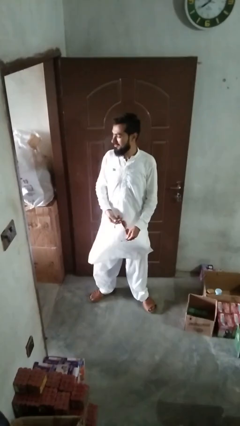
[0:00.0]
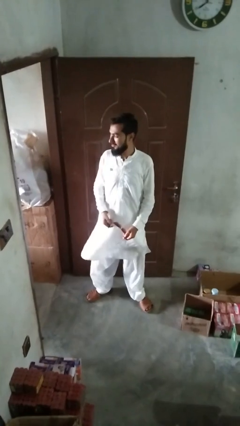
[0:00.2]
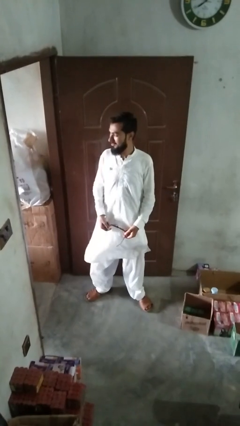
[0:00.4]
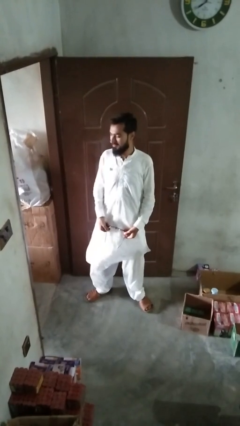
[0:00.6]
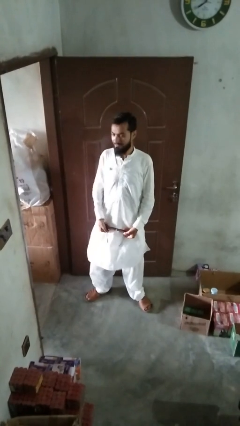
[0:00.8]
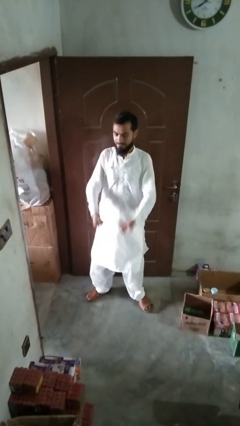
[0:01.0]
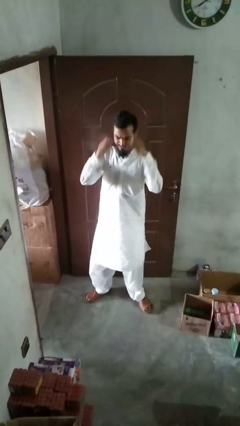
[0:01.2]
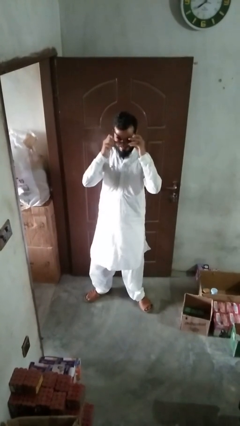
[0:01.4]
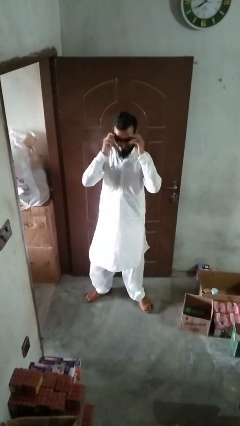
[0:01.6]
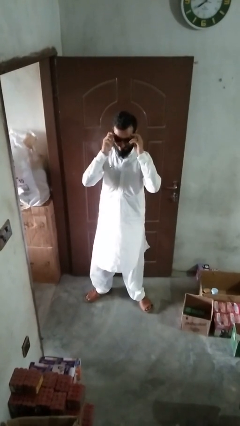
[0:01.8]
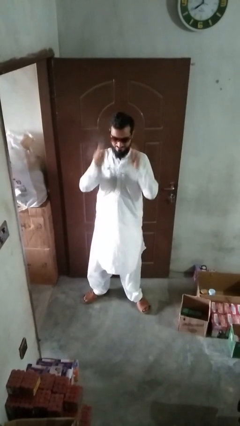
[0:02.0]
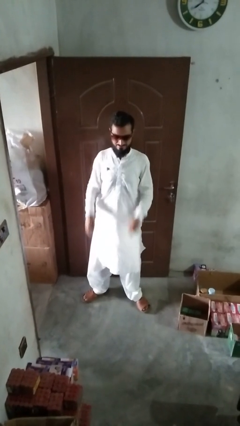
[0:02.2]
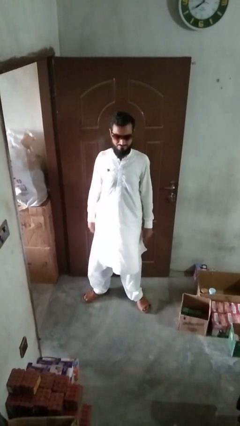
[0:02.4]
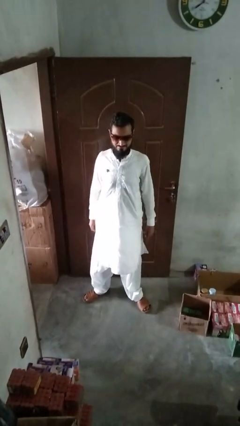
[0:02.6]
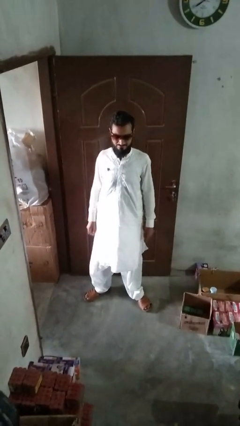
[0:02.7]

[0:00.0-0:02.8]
person puts on sunglasses

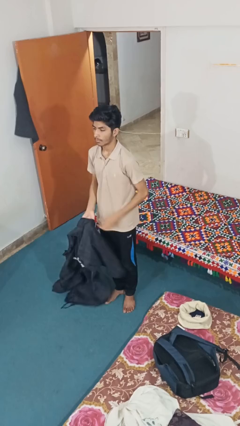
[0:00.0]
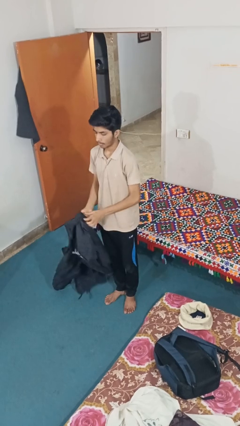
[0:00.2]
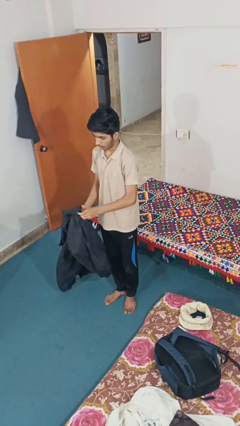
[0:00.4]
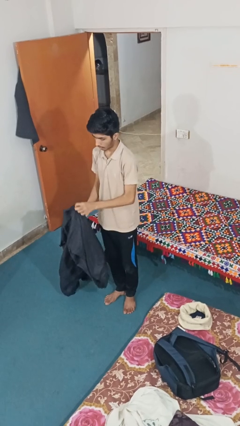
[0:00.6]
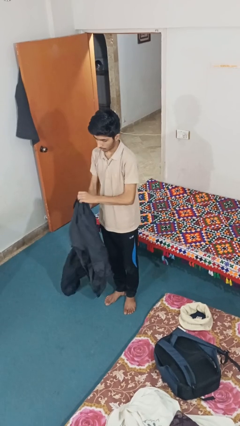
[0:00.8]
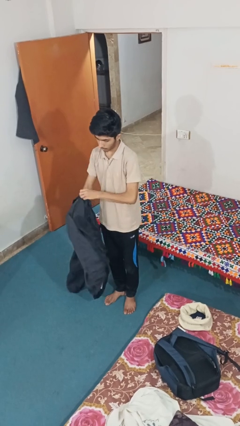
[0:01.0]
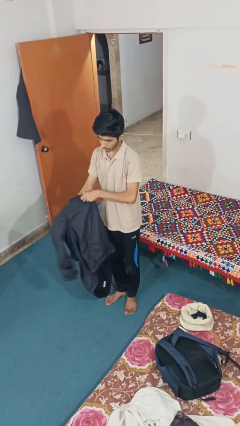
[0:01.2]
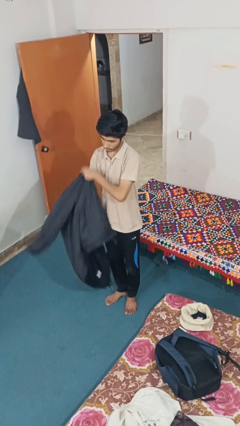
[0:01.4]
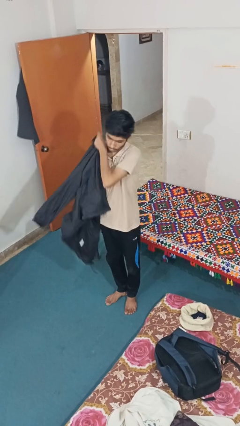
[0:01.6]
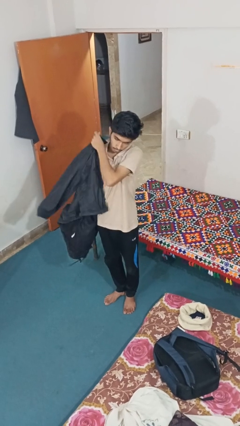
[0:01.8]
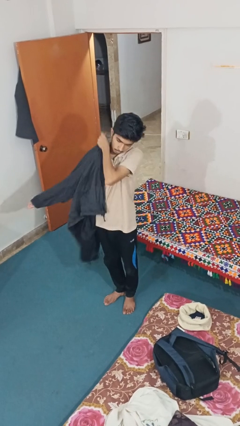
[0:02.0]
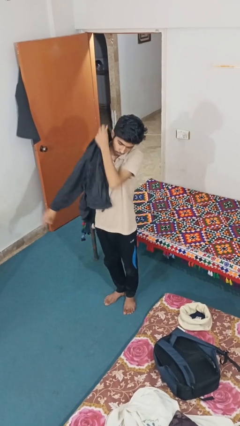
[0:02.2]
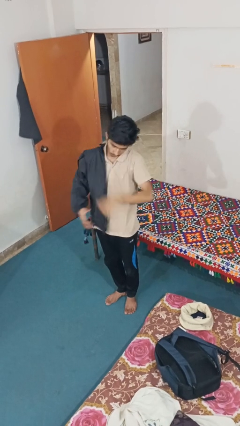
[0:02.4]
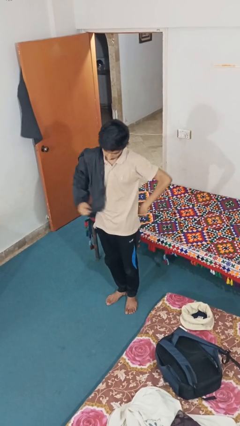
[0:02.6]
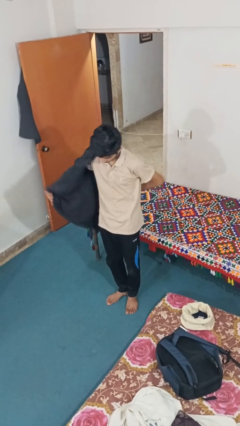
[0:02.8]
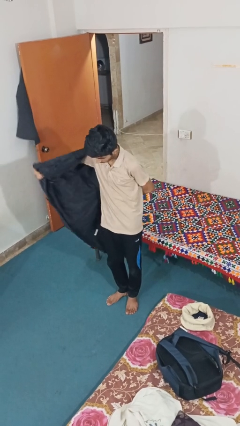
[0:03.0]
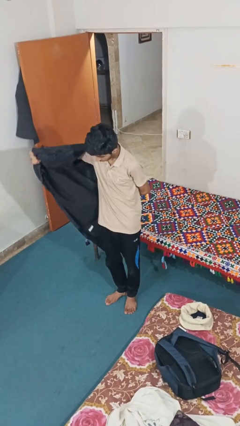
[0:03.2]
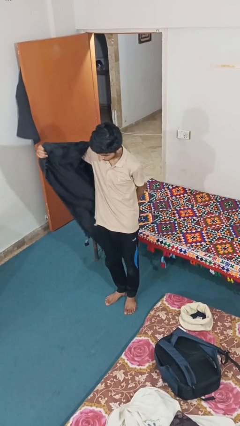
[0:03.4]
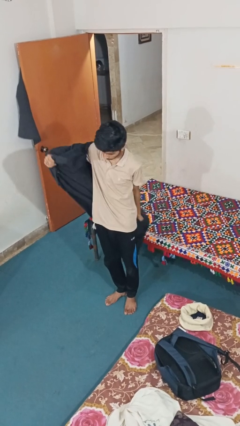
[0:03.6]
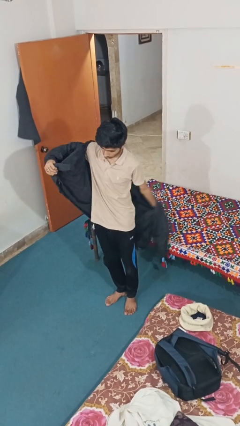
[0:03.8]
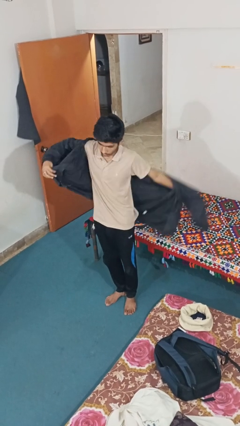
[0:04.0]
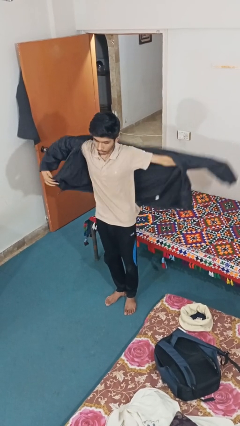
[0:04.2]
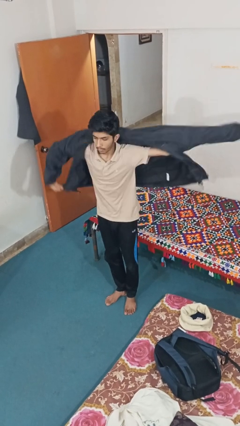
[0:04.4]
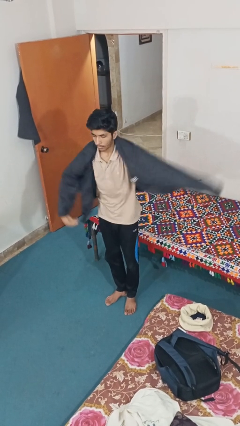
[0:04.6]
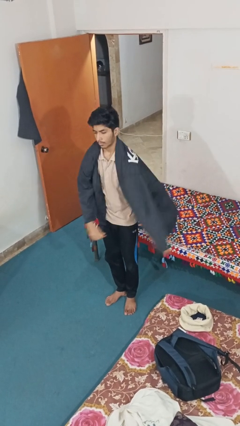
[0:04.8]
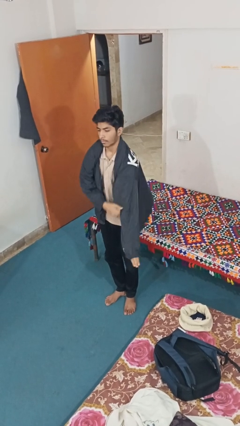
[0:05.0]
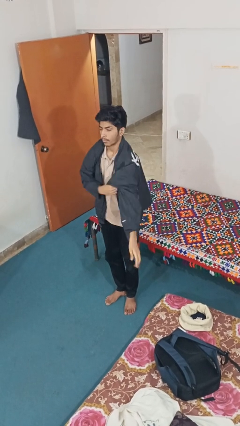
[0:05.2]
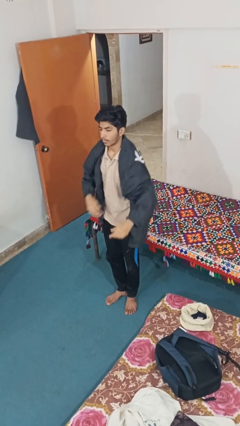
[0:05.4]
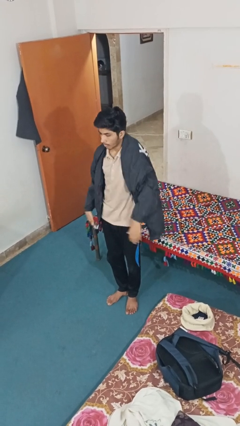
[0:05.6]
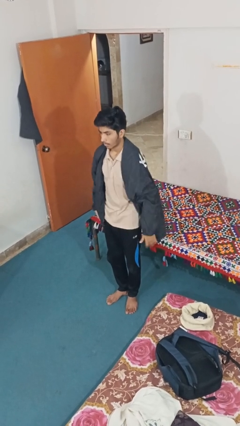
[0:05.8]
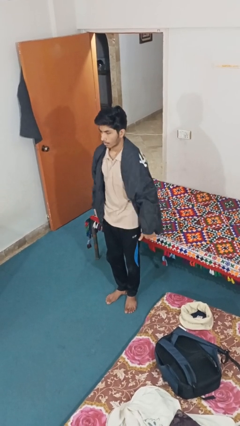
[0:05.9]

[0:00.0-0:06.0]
person puts on jacket

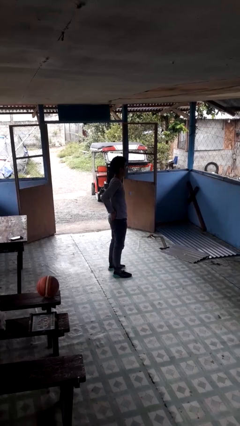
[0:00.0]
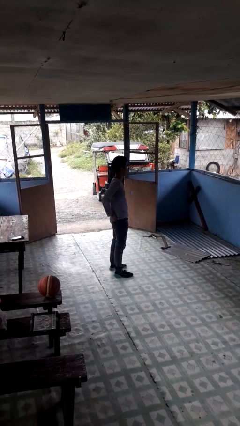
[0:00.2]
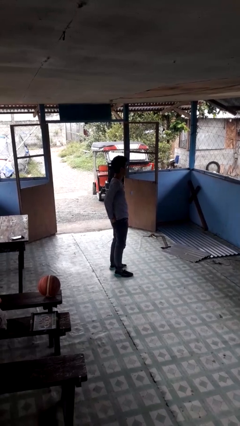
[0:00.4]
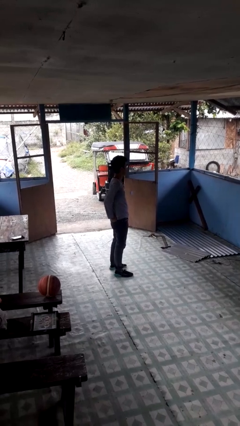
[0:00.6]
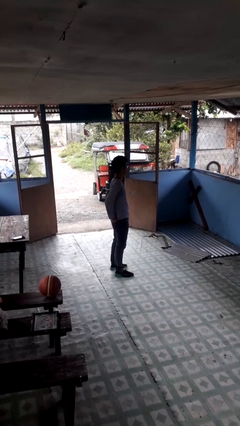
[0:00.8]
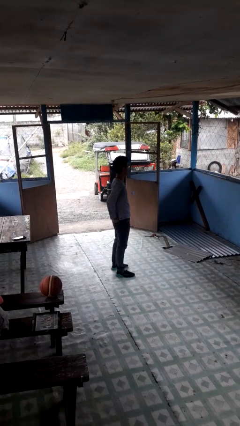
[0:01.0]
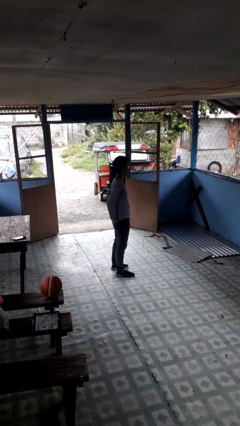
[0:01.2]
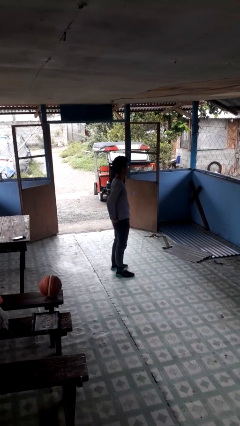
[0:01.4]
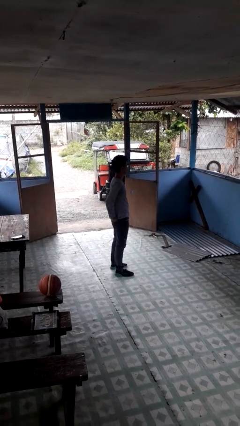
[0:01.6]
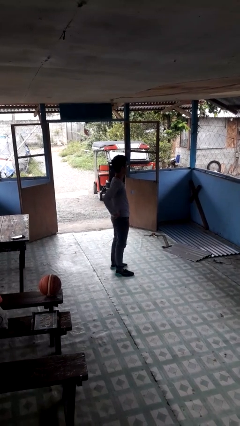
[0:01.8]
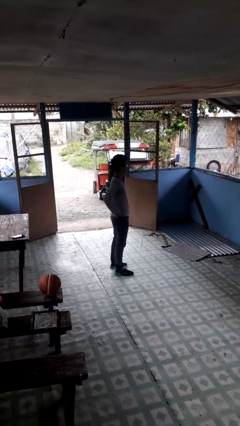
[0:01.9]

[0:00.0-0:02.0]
person puts hands in back pockets

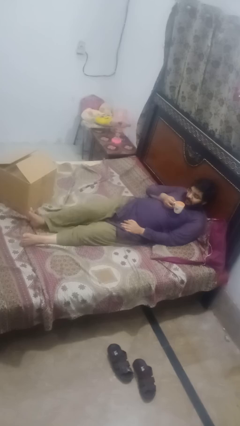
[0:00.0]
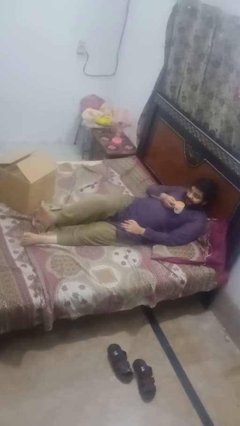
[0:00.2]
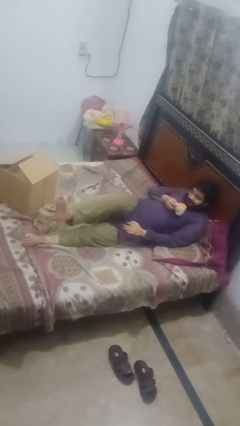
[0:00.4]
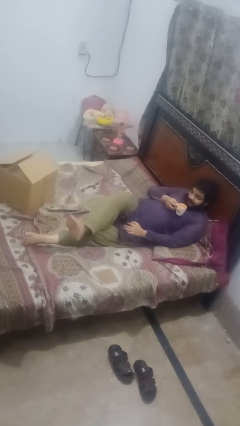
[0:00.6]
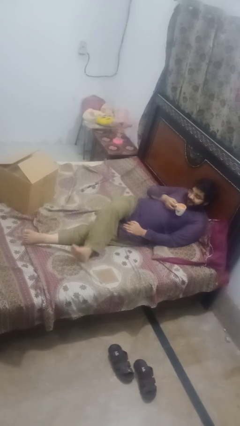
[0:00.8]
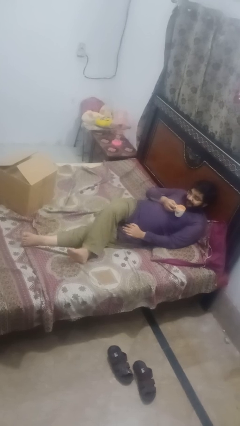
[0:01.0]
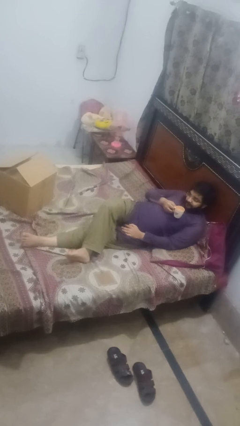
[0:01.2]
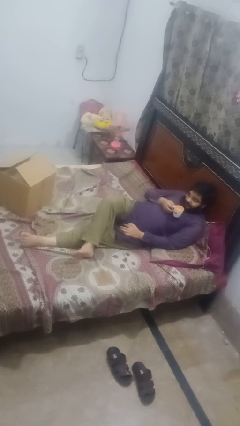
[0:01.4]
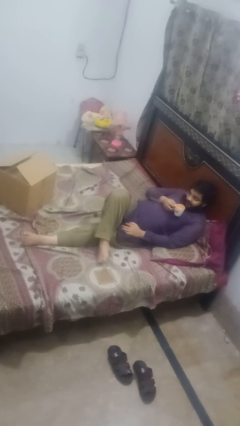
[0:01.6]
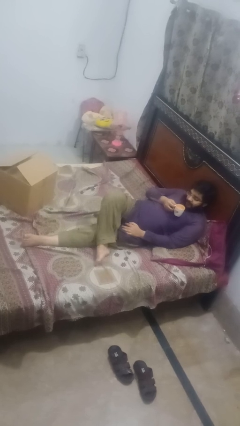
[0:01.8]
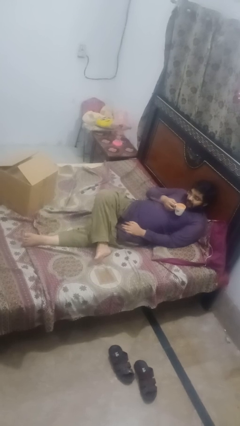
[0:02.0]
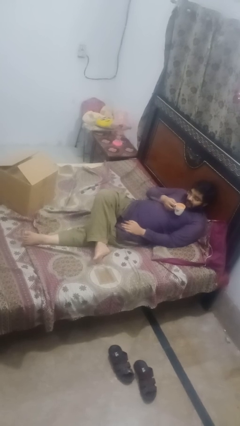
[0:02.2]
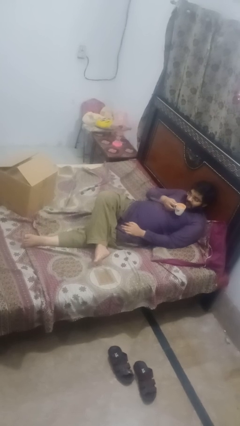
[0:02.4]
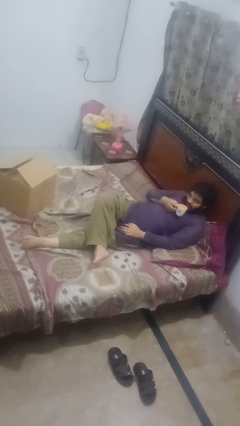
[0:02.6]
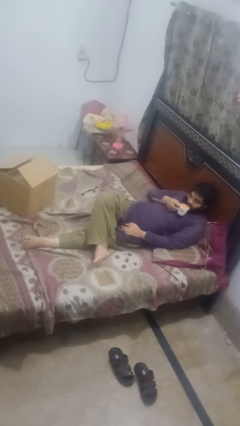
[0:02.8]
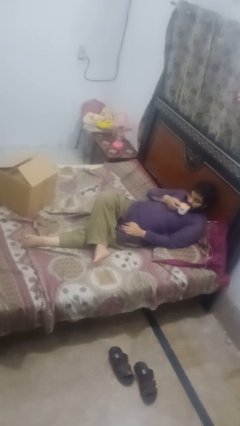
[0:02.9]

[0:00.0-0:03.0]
person crosses legs

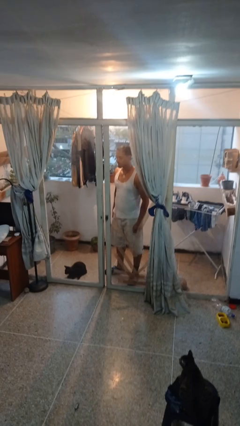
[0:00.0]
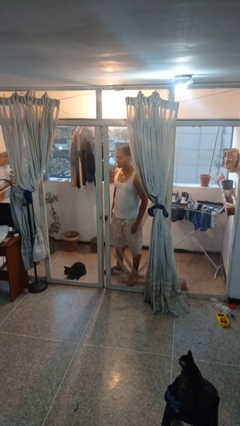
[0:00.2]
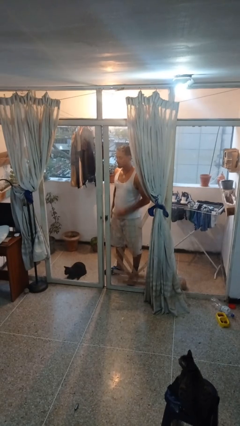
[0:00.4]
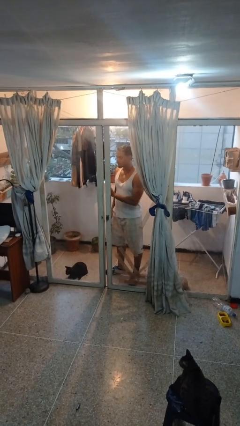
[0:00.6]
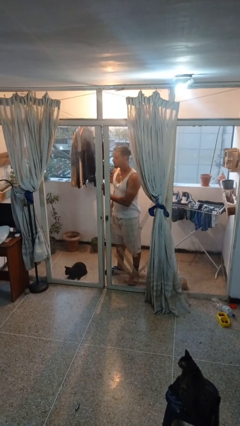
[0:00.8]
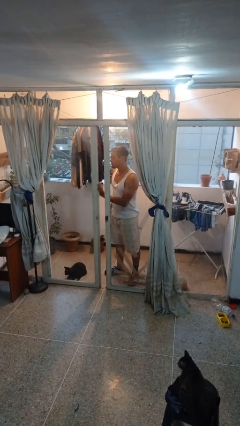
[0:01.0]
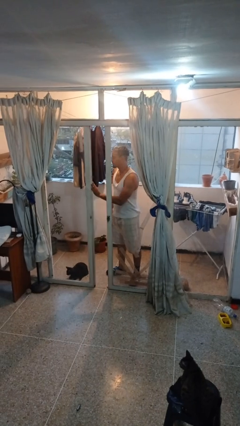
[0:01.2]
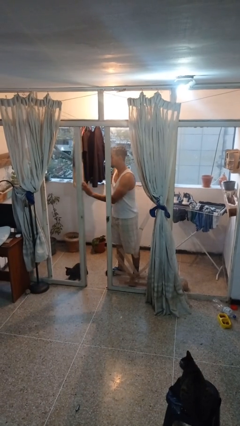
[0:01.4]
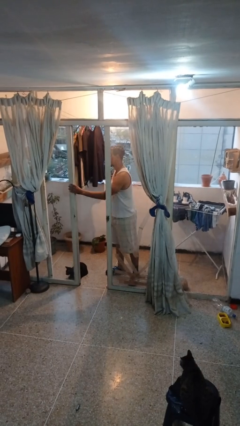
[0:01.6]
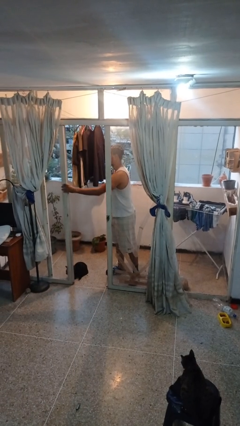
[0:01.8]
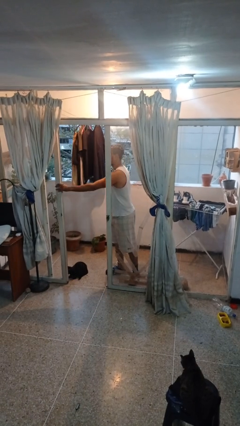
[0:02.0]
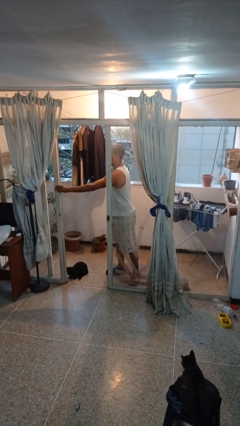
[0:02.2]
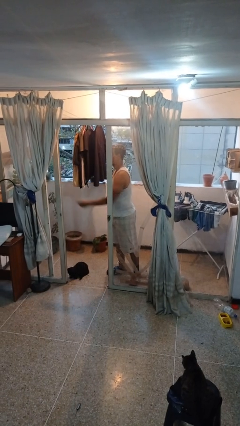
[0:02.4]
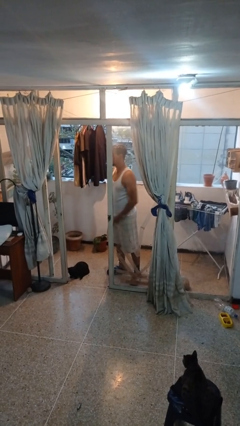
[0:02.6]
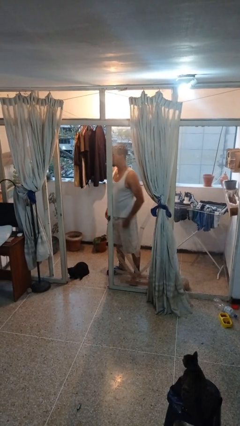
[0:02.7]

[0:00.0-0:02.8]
person opens sliding door

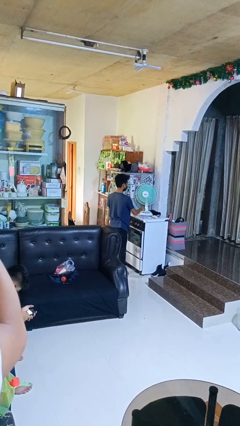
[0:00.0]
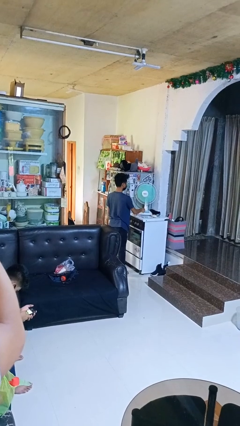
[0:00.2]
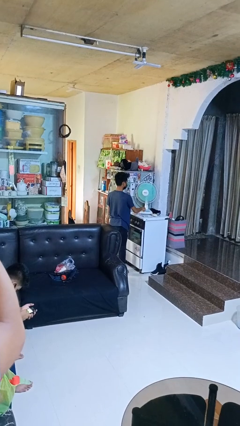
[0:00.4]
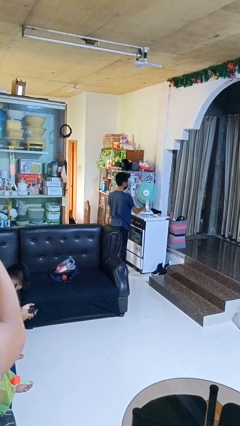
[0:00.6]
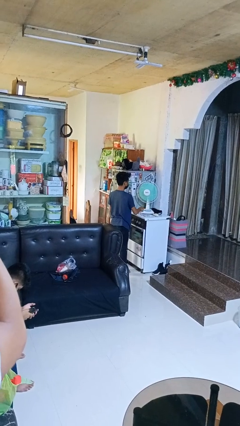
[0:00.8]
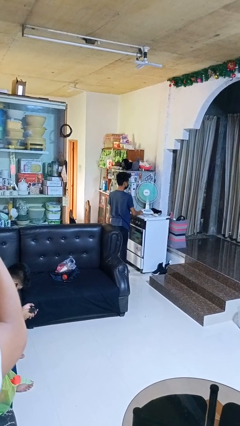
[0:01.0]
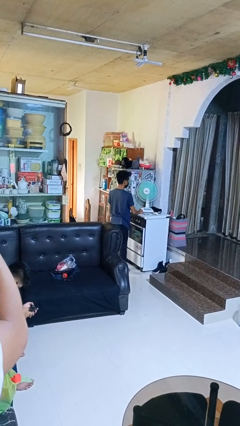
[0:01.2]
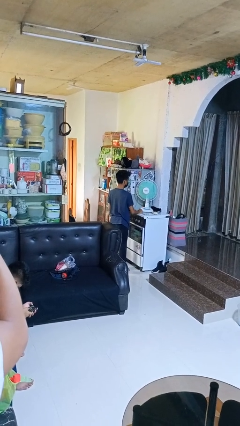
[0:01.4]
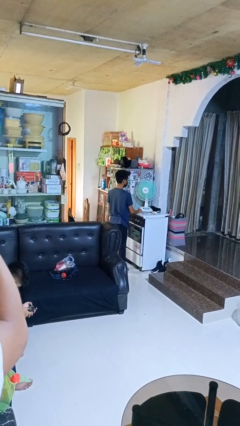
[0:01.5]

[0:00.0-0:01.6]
person turns off fan
